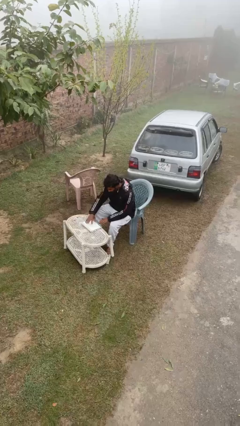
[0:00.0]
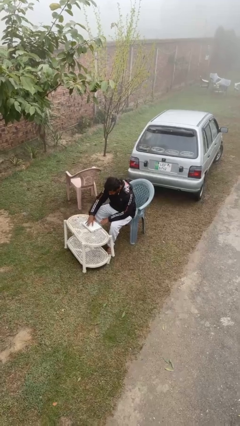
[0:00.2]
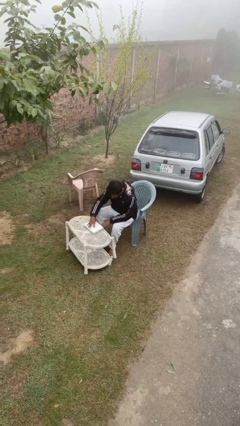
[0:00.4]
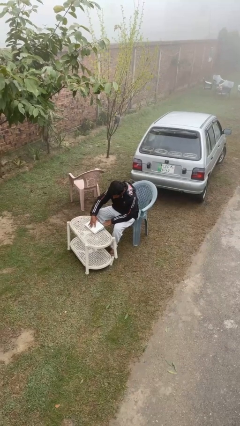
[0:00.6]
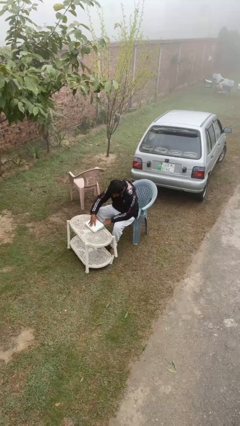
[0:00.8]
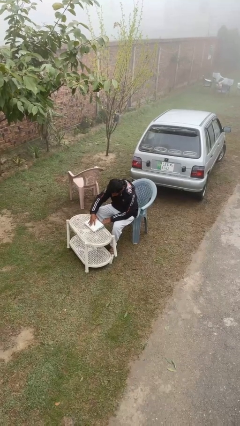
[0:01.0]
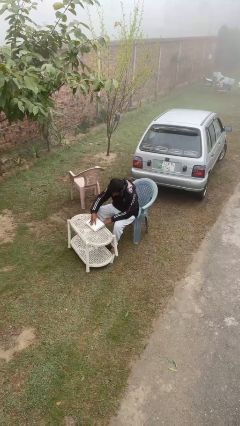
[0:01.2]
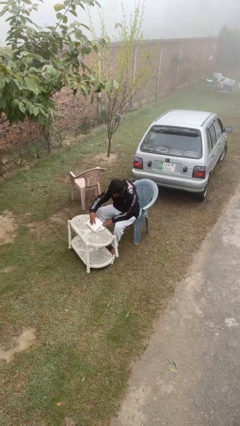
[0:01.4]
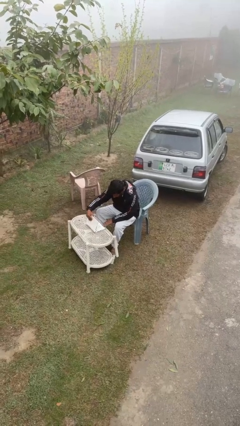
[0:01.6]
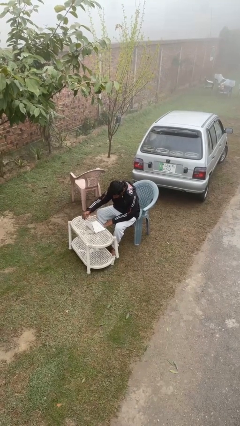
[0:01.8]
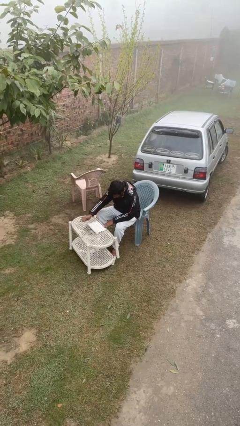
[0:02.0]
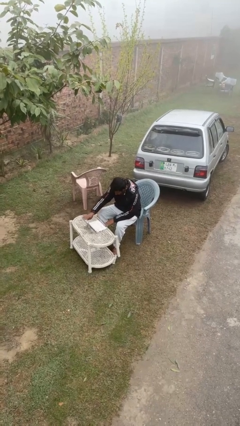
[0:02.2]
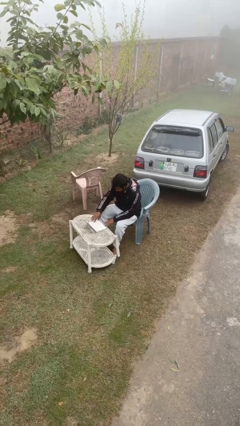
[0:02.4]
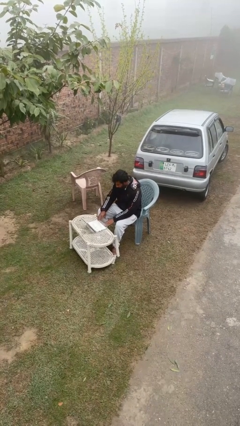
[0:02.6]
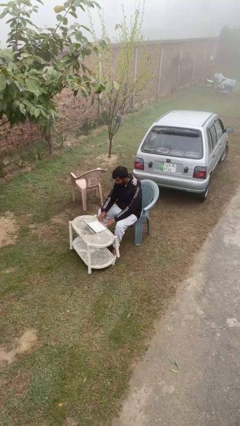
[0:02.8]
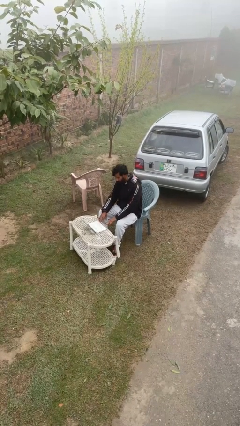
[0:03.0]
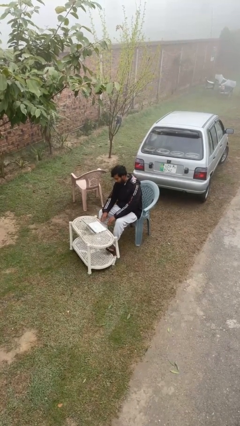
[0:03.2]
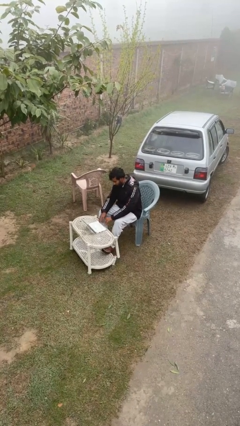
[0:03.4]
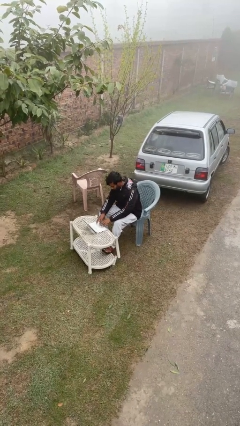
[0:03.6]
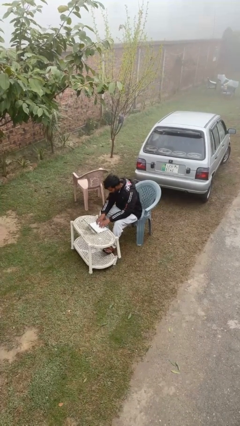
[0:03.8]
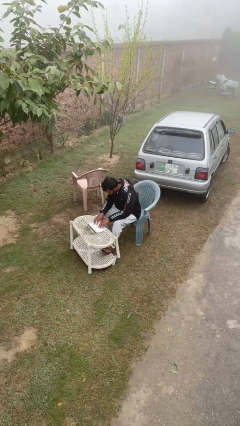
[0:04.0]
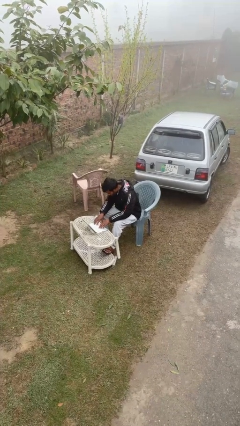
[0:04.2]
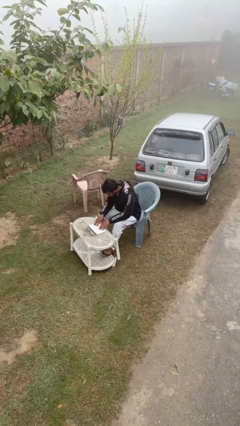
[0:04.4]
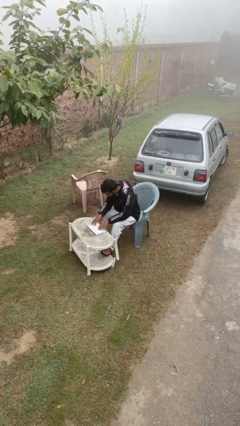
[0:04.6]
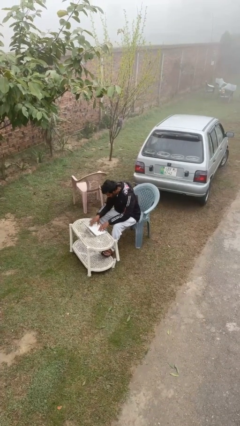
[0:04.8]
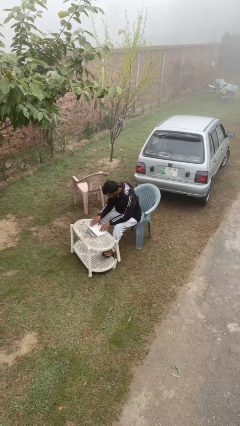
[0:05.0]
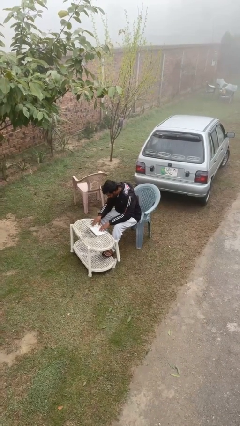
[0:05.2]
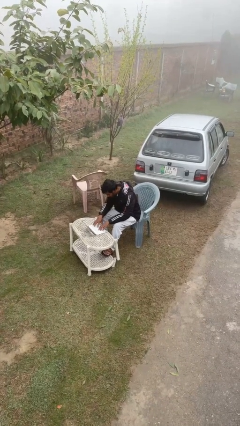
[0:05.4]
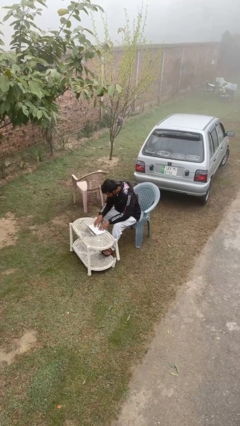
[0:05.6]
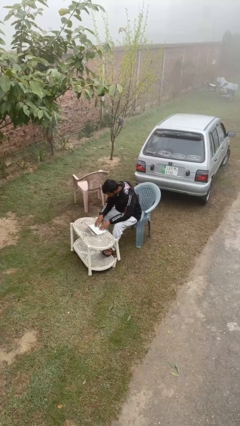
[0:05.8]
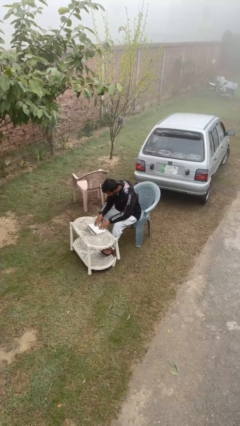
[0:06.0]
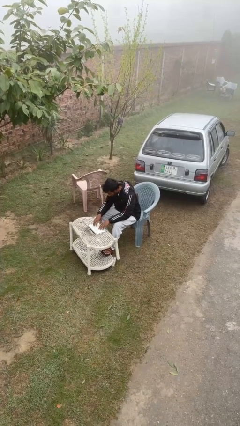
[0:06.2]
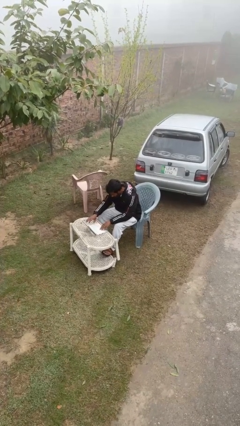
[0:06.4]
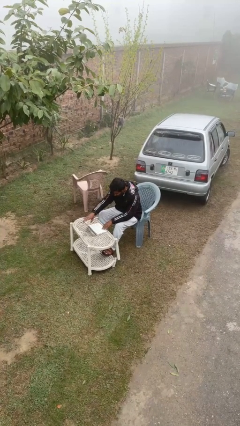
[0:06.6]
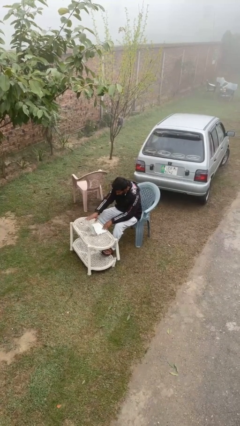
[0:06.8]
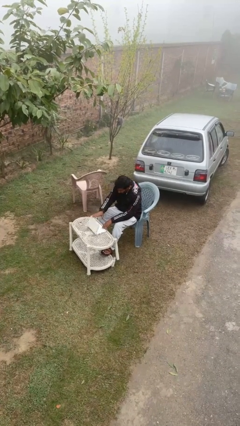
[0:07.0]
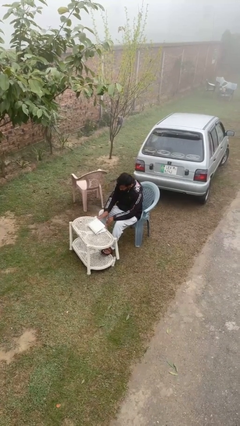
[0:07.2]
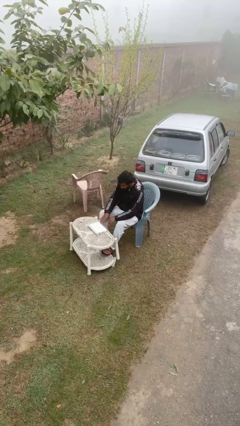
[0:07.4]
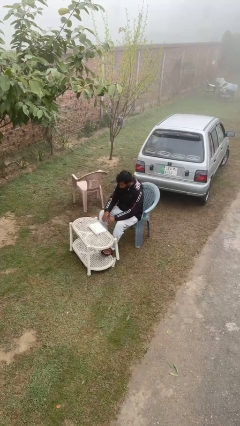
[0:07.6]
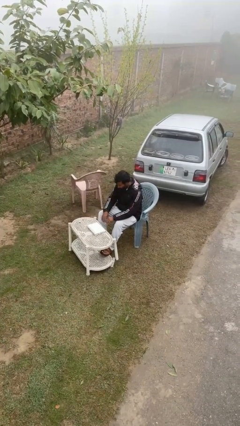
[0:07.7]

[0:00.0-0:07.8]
person interacts with laptop

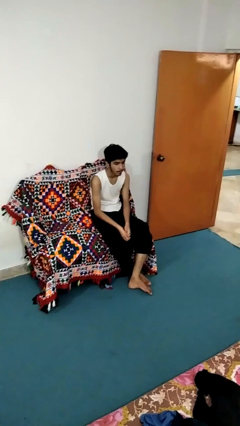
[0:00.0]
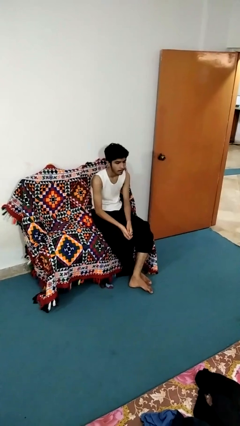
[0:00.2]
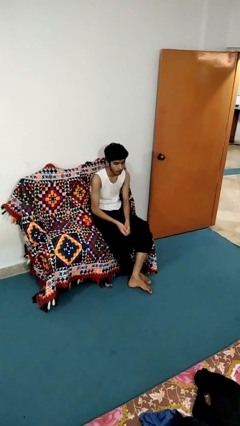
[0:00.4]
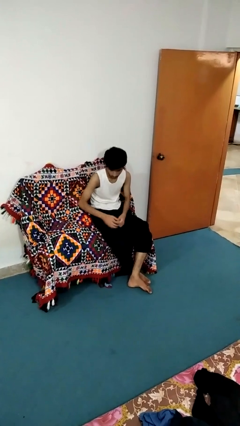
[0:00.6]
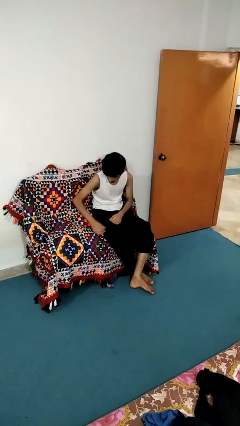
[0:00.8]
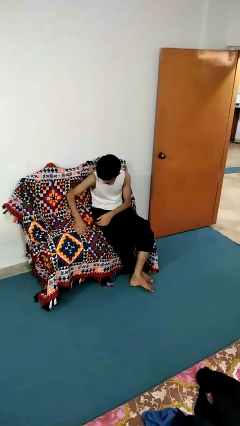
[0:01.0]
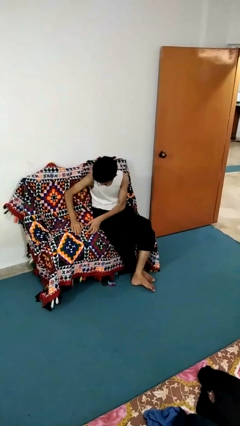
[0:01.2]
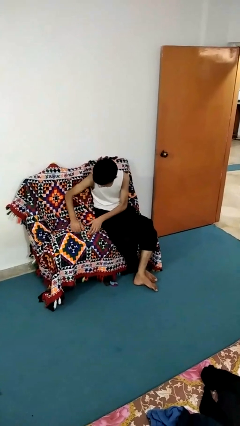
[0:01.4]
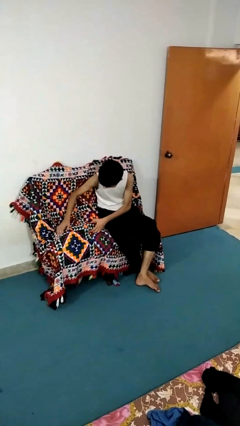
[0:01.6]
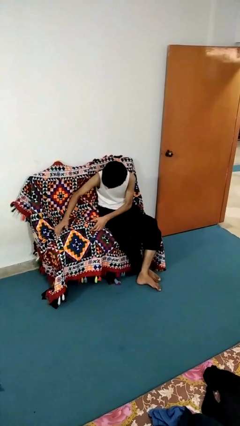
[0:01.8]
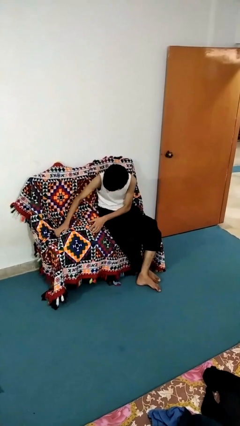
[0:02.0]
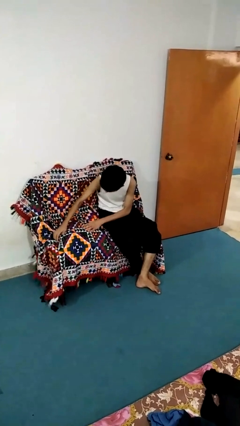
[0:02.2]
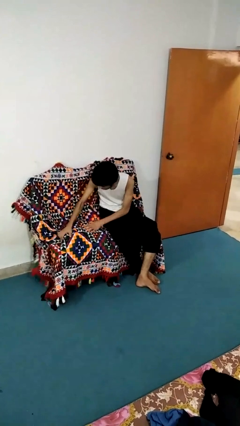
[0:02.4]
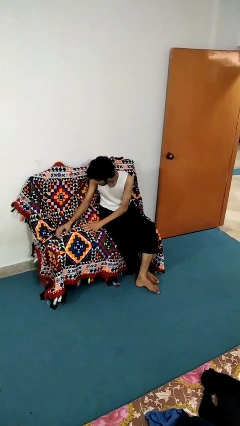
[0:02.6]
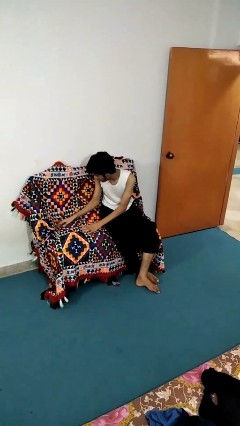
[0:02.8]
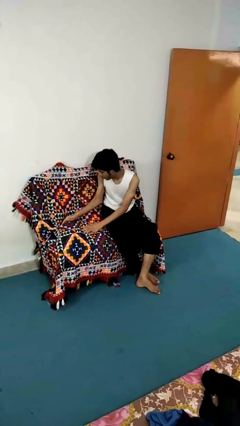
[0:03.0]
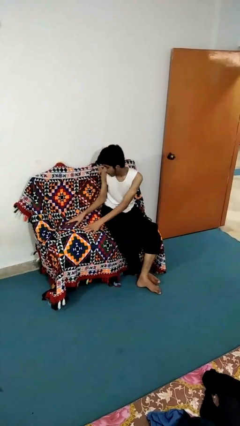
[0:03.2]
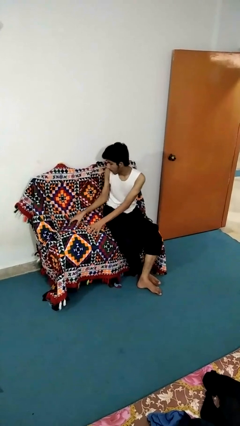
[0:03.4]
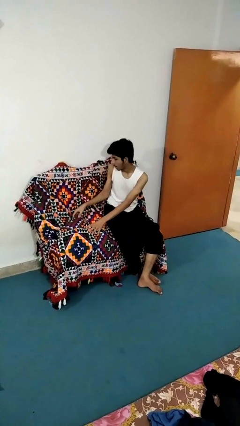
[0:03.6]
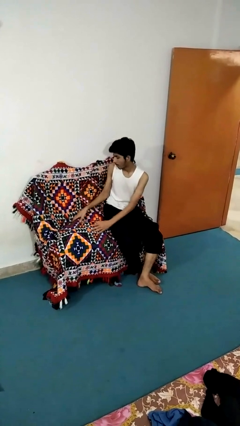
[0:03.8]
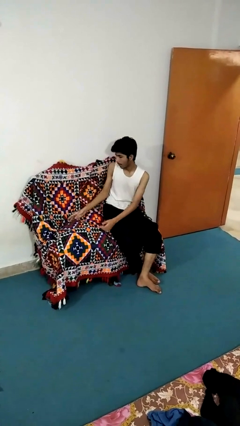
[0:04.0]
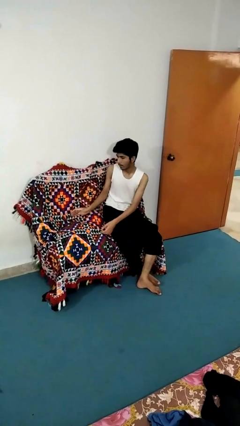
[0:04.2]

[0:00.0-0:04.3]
person searches in couch

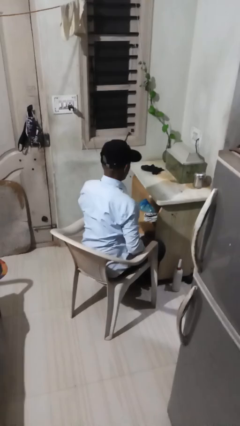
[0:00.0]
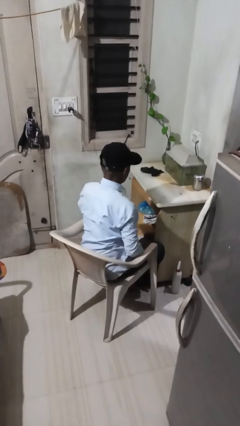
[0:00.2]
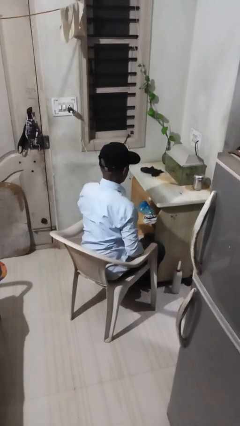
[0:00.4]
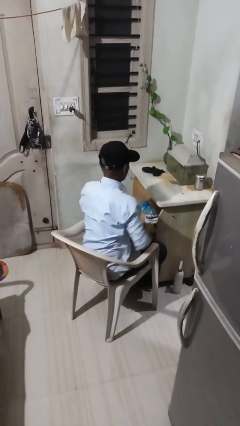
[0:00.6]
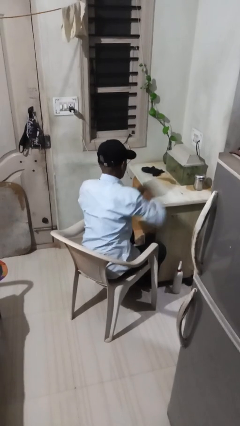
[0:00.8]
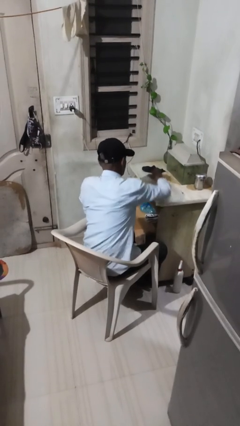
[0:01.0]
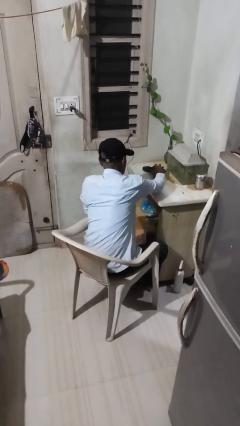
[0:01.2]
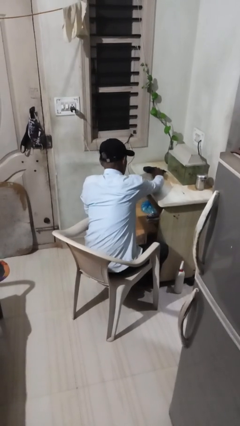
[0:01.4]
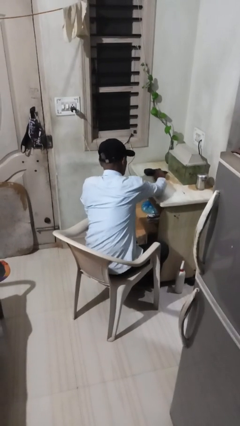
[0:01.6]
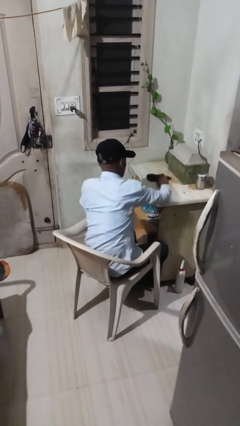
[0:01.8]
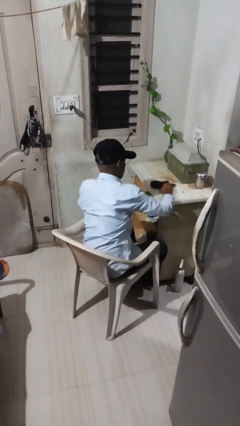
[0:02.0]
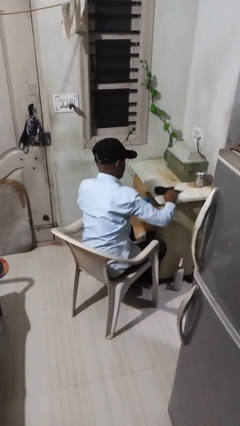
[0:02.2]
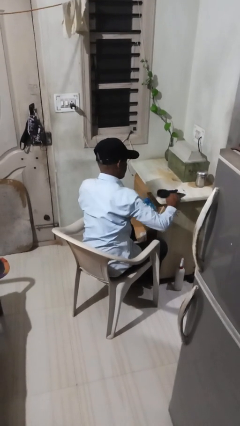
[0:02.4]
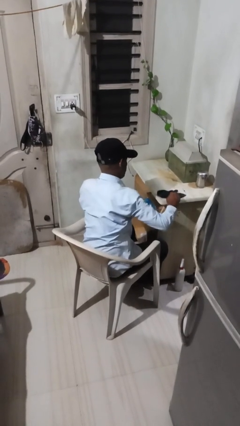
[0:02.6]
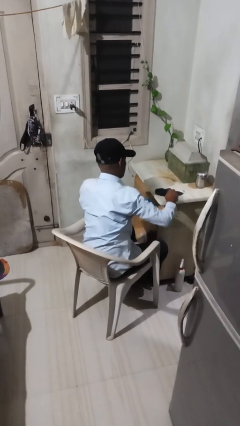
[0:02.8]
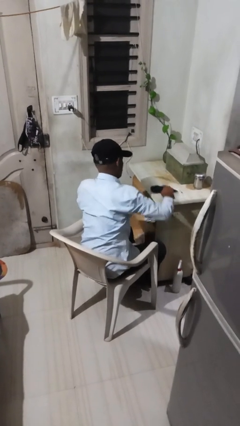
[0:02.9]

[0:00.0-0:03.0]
person cleans table with rag

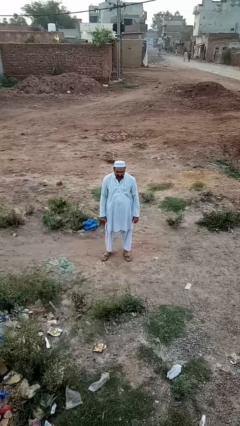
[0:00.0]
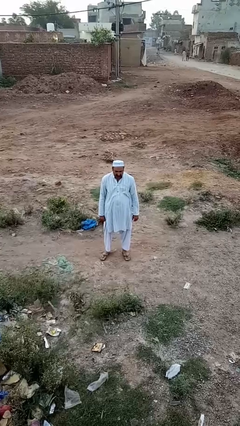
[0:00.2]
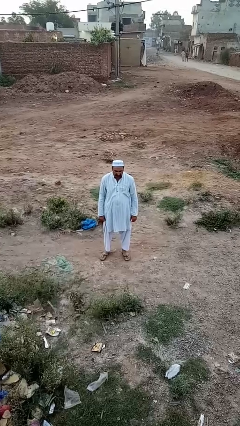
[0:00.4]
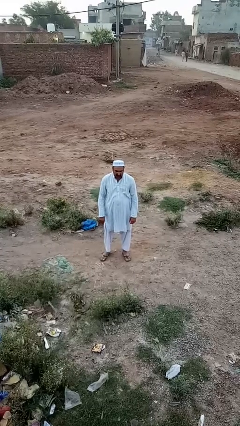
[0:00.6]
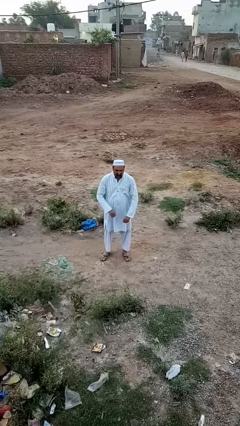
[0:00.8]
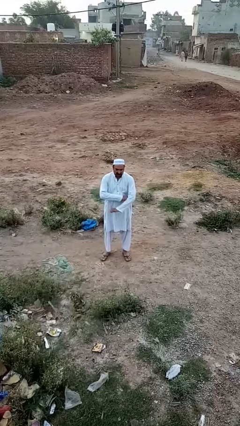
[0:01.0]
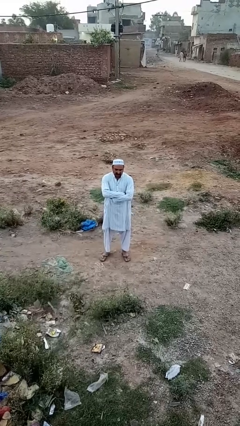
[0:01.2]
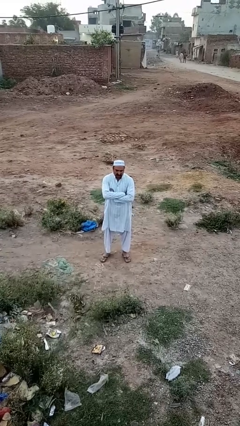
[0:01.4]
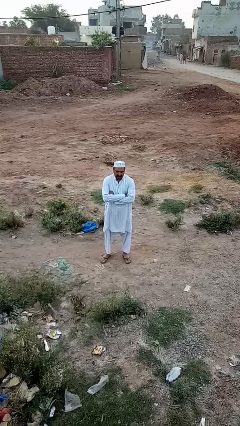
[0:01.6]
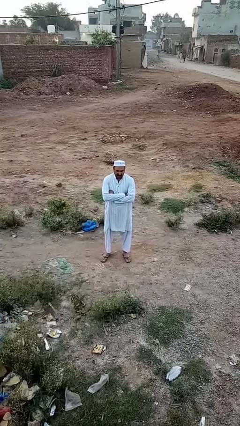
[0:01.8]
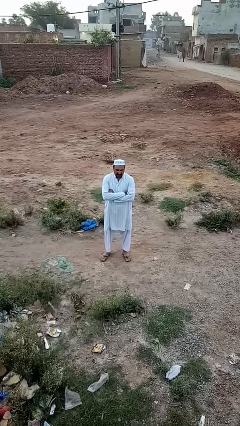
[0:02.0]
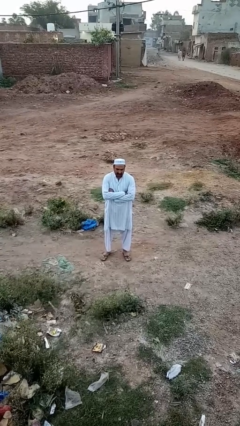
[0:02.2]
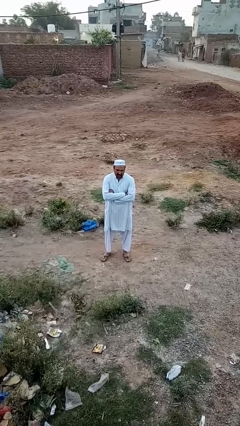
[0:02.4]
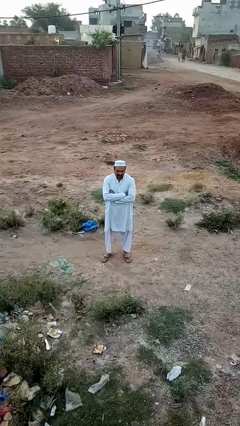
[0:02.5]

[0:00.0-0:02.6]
person crosses arms
